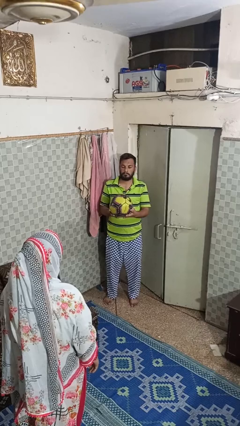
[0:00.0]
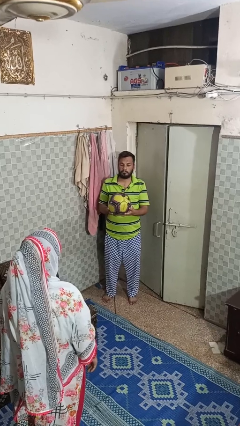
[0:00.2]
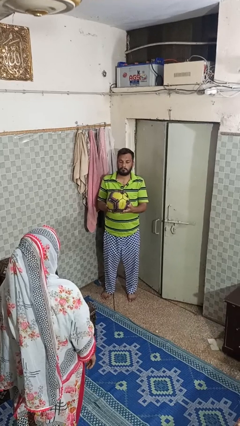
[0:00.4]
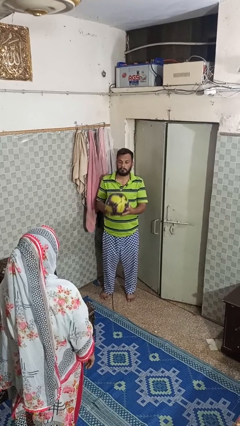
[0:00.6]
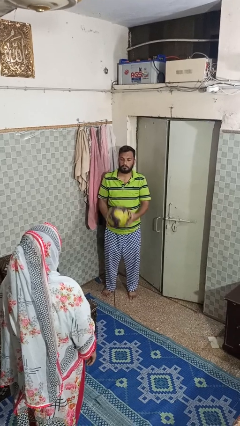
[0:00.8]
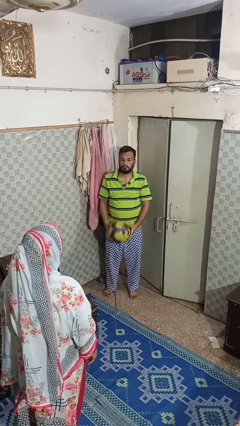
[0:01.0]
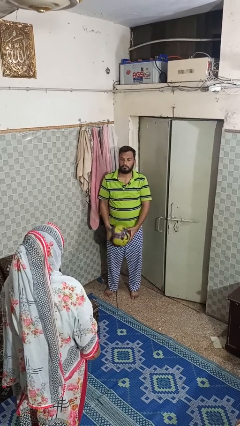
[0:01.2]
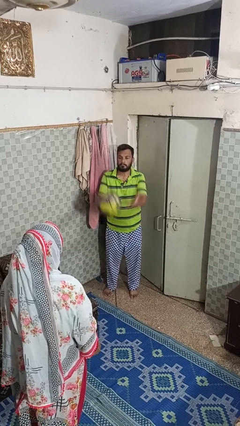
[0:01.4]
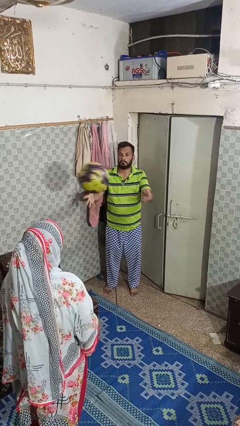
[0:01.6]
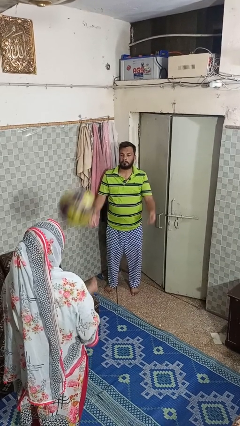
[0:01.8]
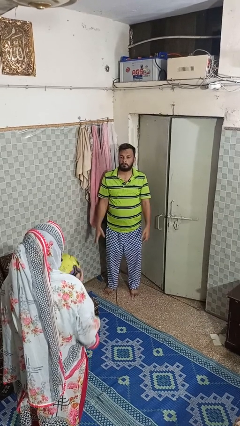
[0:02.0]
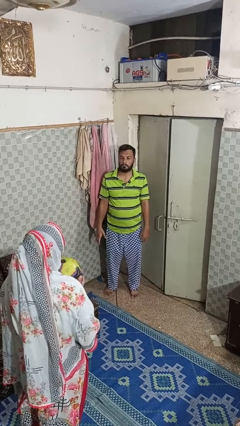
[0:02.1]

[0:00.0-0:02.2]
person throws object to person

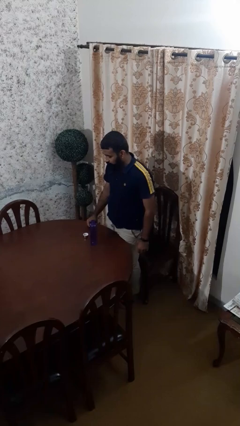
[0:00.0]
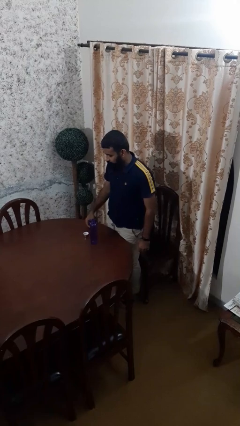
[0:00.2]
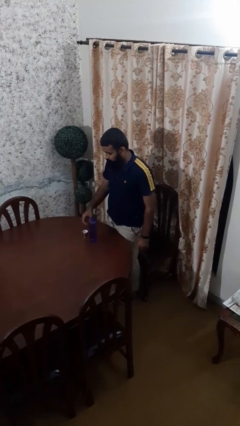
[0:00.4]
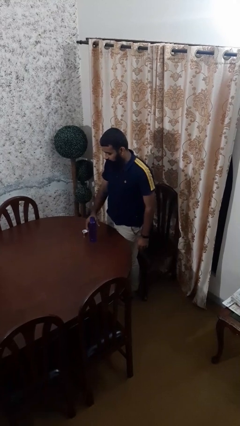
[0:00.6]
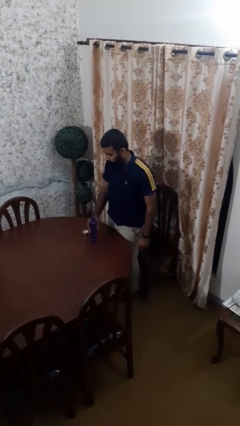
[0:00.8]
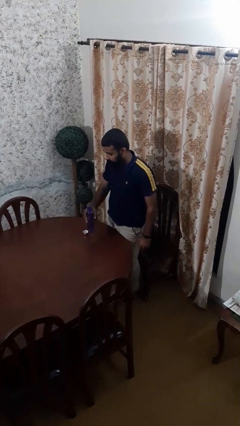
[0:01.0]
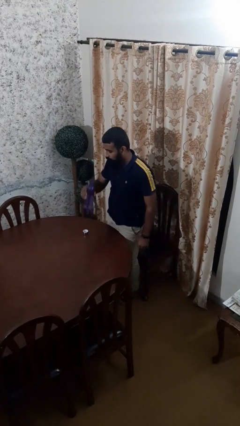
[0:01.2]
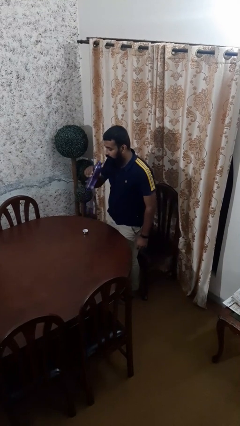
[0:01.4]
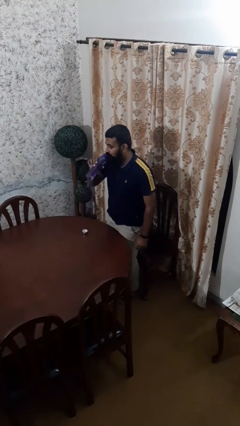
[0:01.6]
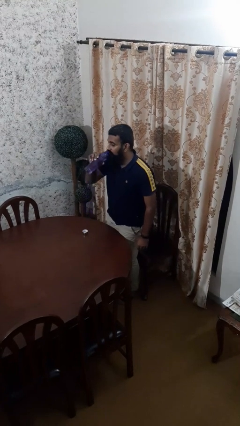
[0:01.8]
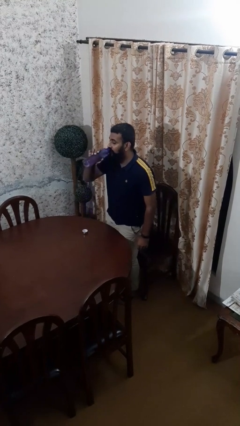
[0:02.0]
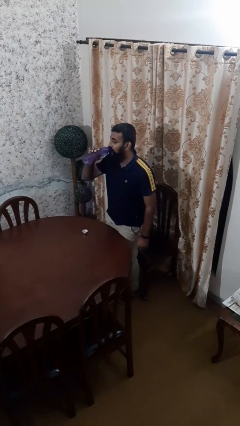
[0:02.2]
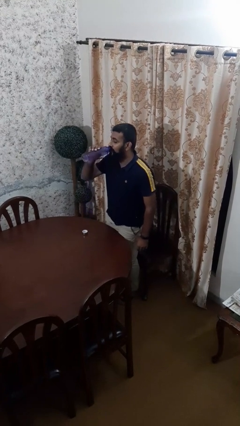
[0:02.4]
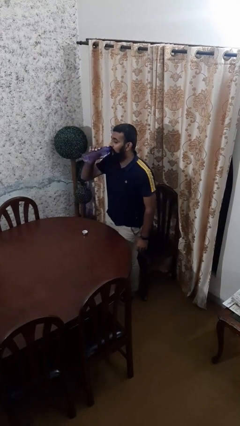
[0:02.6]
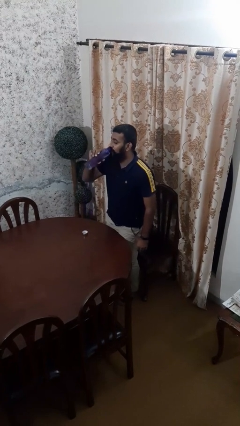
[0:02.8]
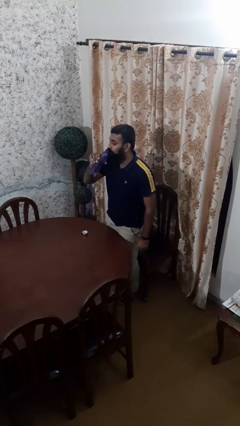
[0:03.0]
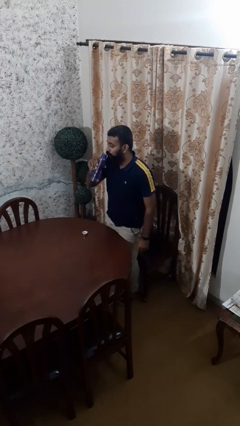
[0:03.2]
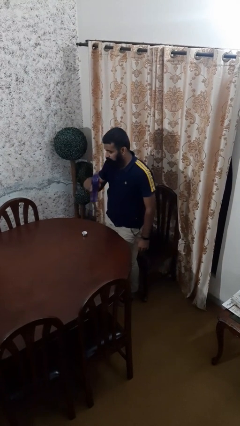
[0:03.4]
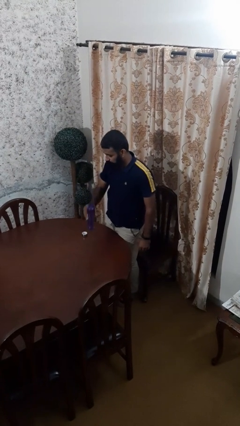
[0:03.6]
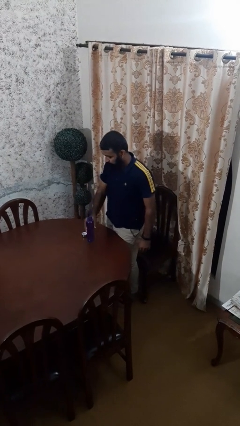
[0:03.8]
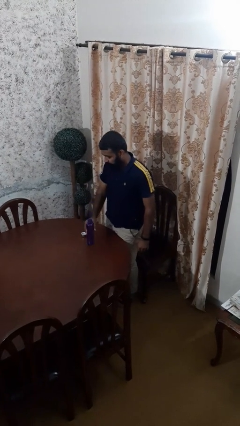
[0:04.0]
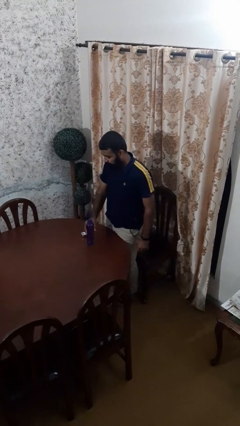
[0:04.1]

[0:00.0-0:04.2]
person drinks from bottle

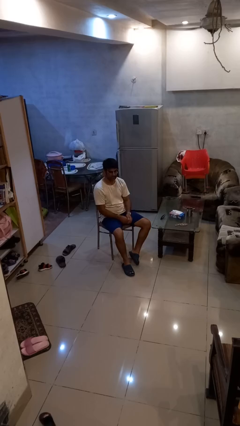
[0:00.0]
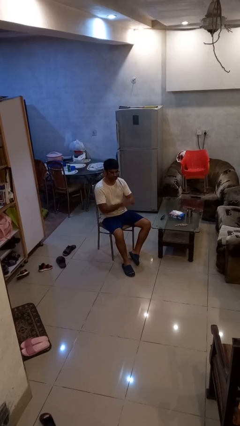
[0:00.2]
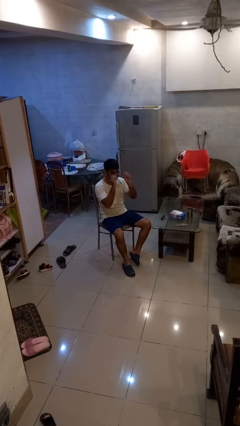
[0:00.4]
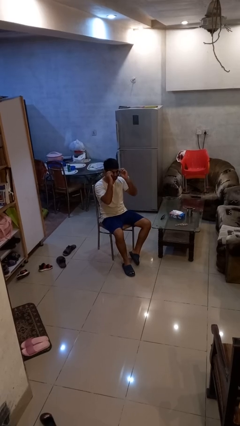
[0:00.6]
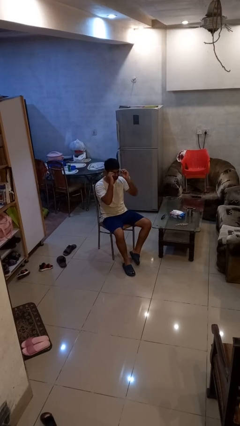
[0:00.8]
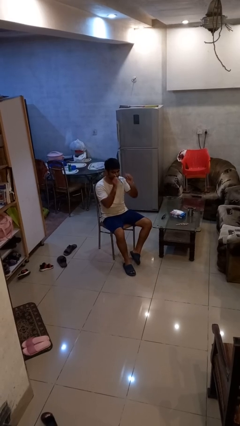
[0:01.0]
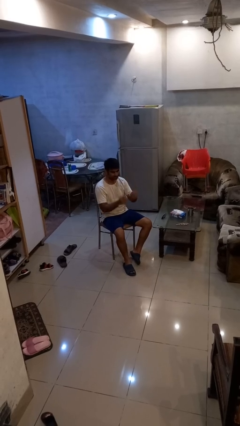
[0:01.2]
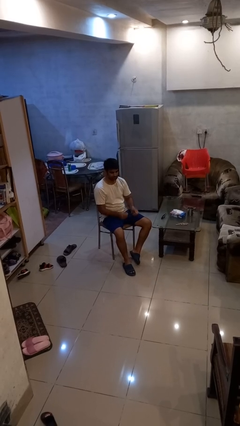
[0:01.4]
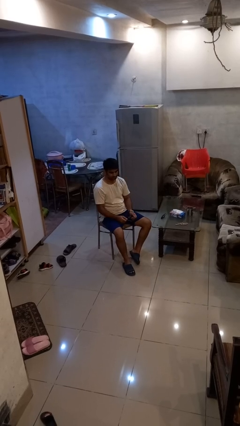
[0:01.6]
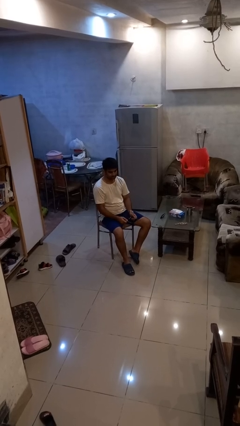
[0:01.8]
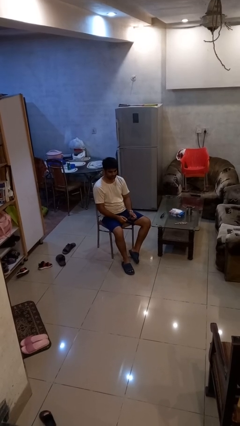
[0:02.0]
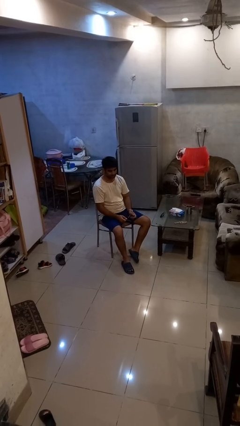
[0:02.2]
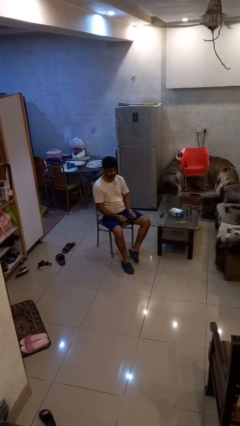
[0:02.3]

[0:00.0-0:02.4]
person takes off glasses

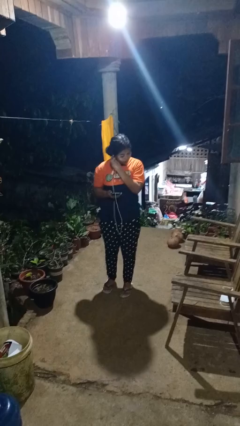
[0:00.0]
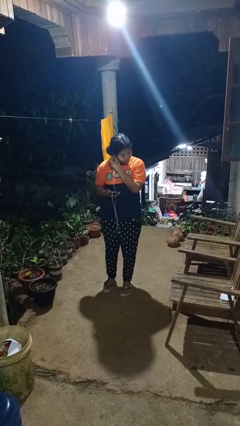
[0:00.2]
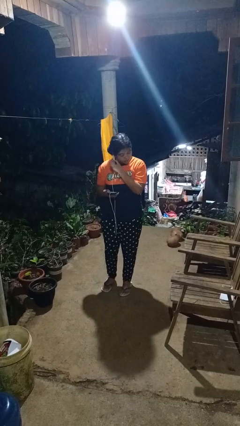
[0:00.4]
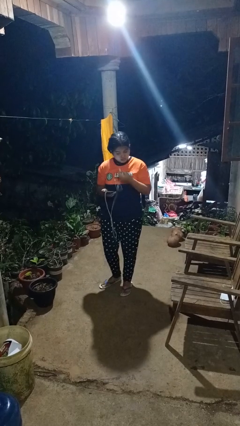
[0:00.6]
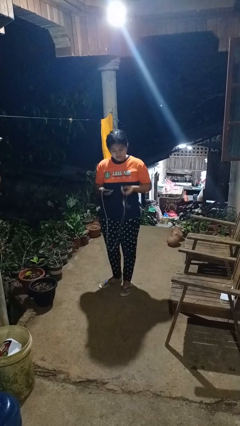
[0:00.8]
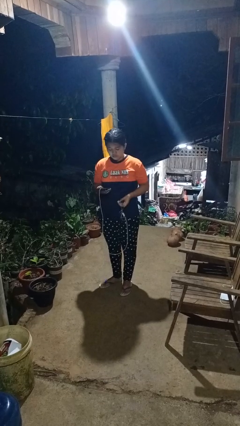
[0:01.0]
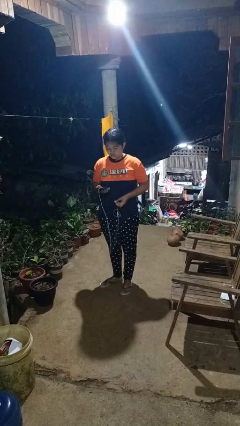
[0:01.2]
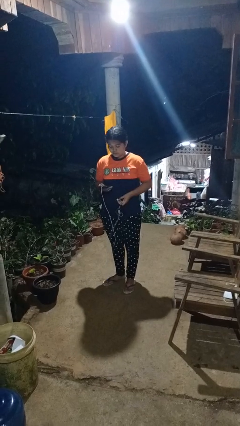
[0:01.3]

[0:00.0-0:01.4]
person takes off headphones

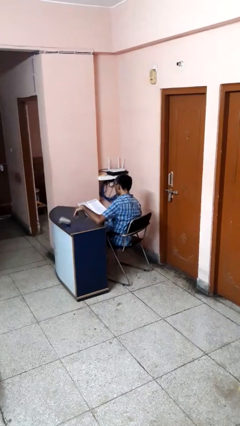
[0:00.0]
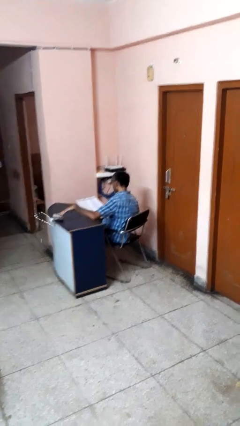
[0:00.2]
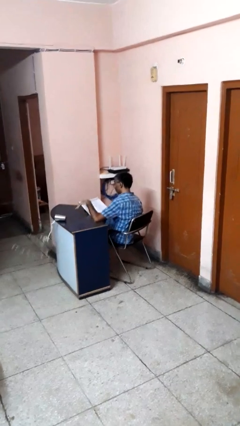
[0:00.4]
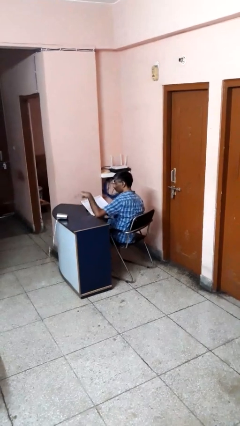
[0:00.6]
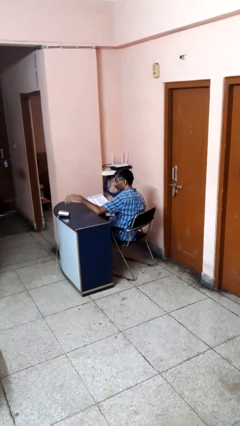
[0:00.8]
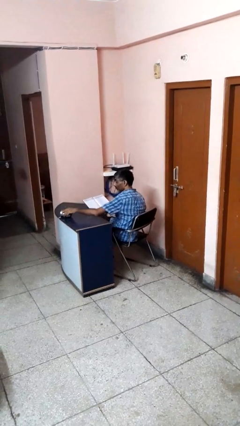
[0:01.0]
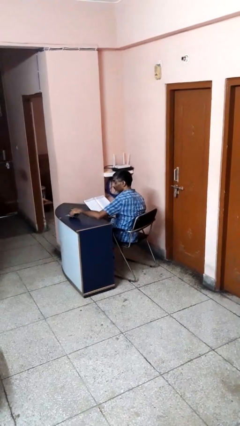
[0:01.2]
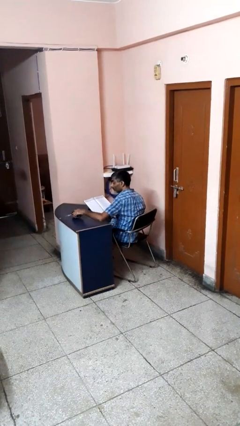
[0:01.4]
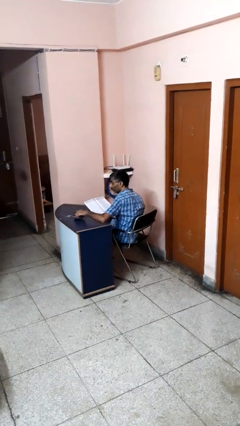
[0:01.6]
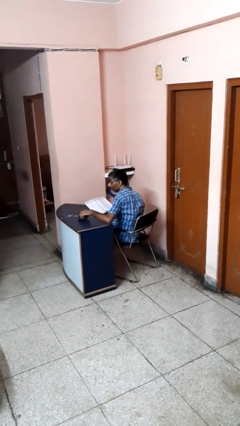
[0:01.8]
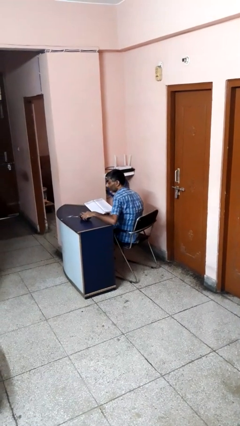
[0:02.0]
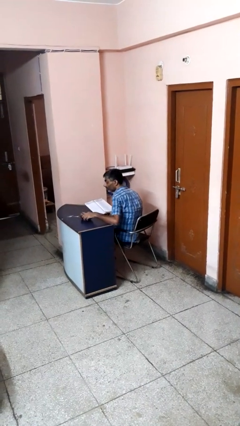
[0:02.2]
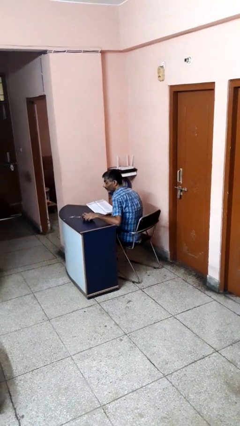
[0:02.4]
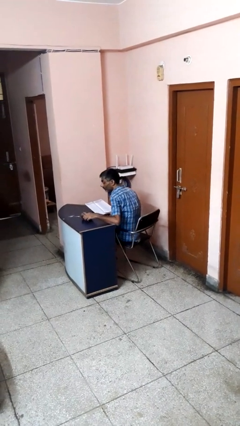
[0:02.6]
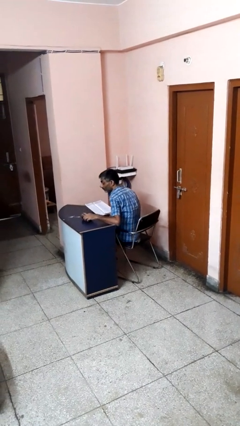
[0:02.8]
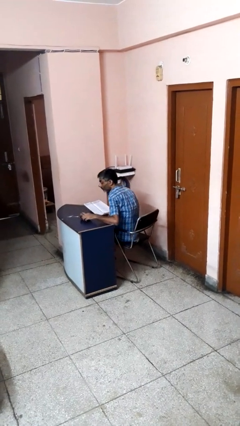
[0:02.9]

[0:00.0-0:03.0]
person spills on table

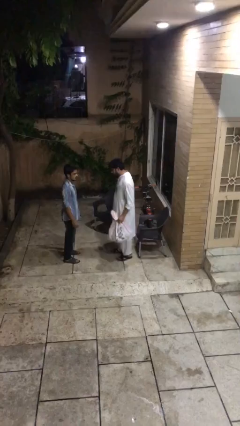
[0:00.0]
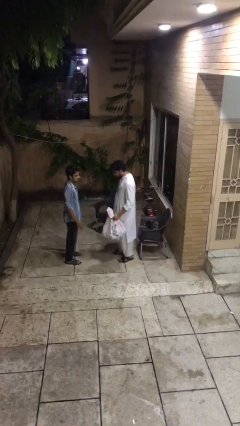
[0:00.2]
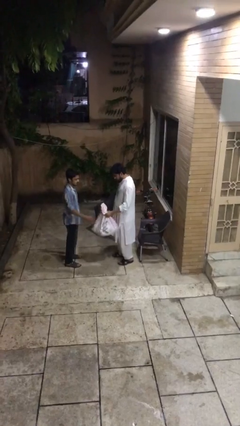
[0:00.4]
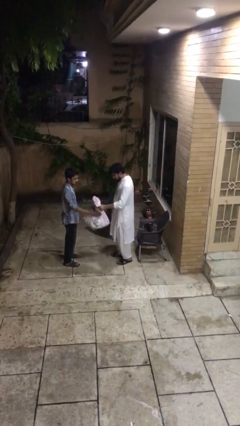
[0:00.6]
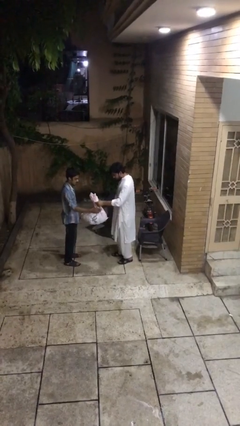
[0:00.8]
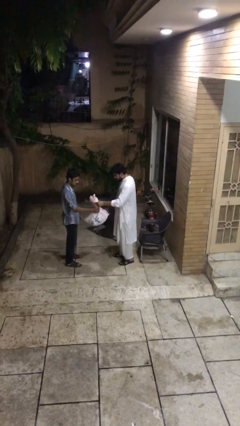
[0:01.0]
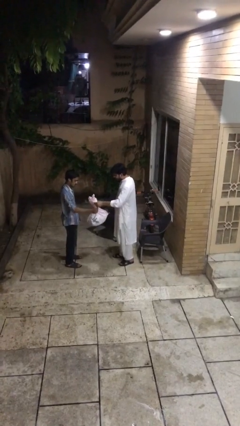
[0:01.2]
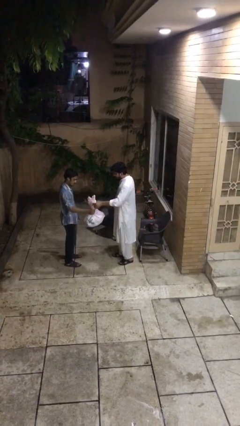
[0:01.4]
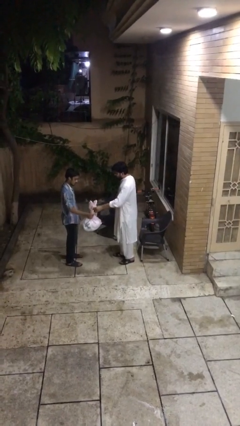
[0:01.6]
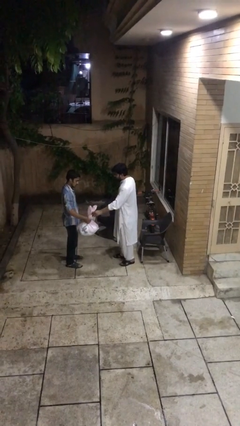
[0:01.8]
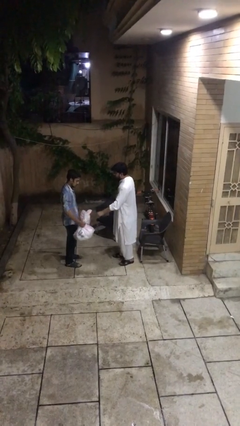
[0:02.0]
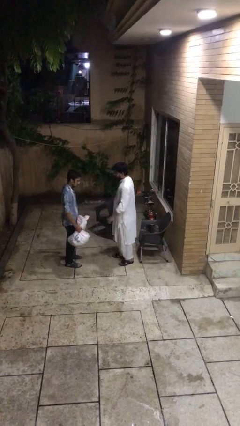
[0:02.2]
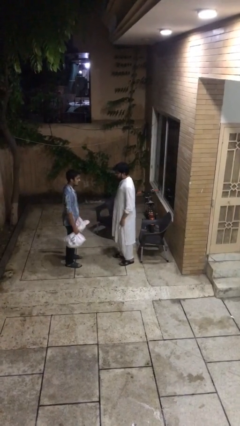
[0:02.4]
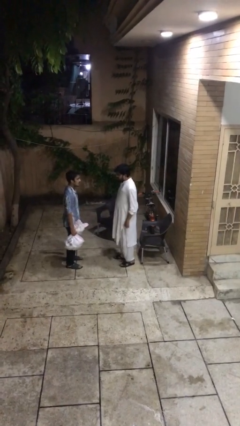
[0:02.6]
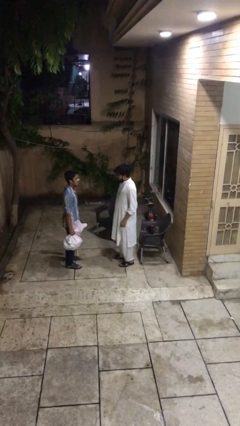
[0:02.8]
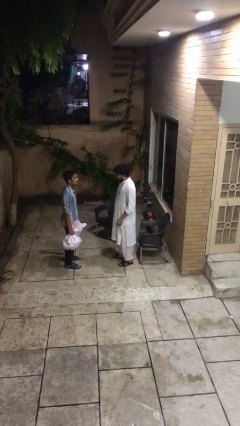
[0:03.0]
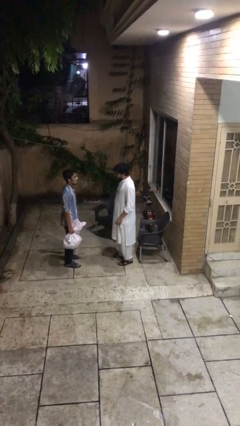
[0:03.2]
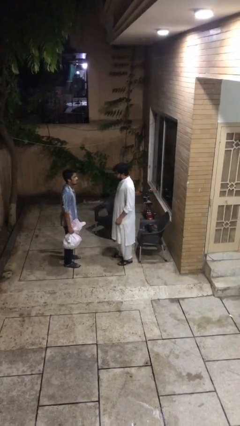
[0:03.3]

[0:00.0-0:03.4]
person transfers object to person

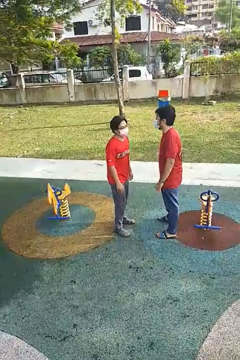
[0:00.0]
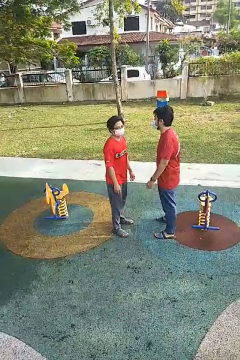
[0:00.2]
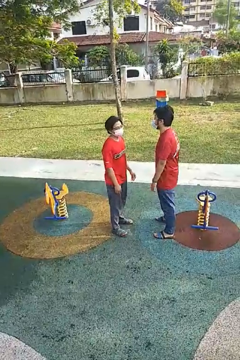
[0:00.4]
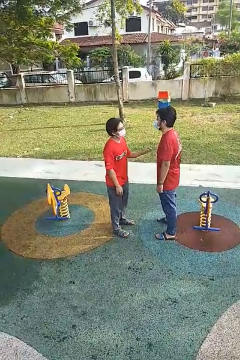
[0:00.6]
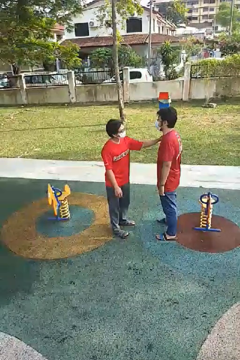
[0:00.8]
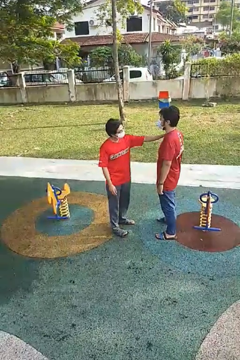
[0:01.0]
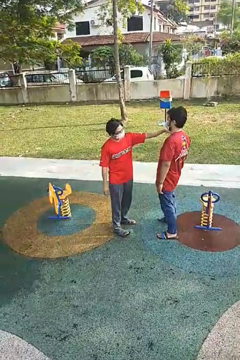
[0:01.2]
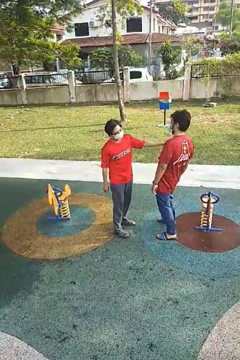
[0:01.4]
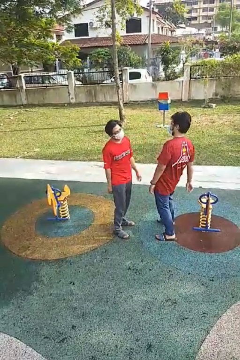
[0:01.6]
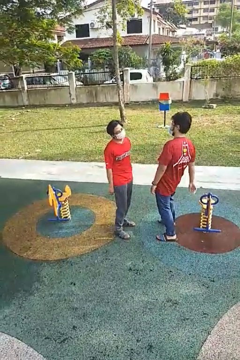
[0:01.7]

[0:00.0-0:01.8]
person shoves person
